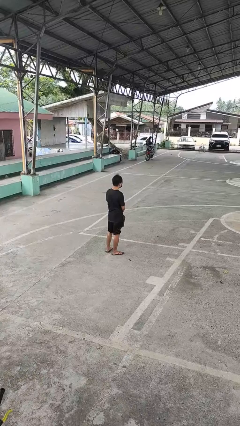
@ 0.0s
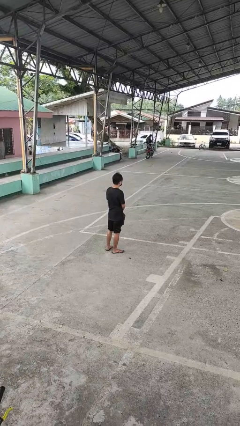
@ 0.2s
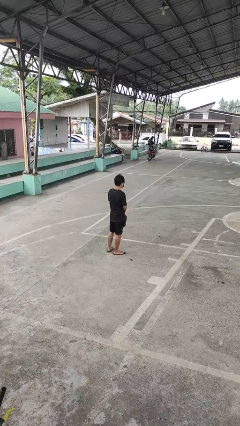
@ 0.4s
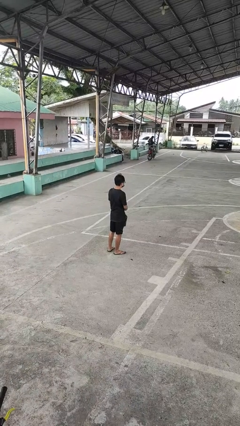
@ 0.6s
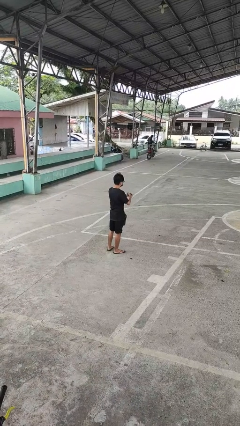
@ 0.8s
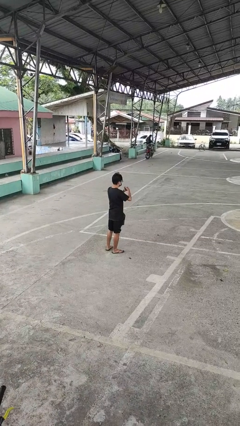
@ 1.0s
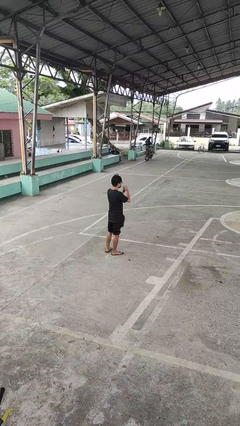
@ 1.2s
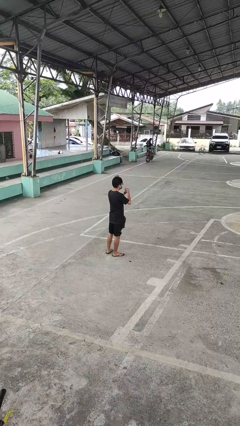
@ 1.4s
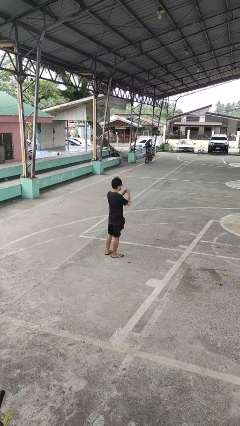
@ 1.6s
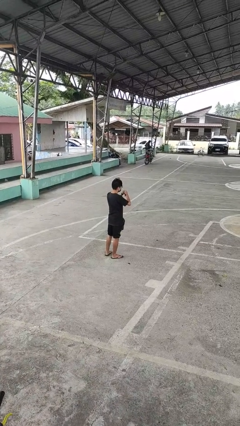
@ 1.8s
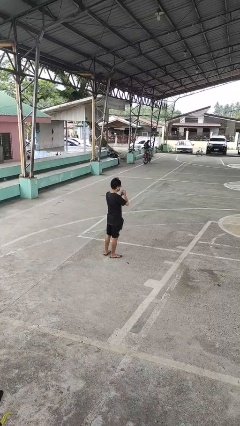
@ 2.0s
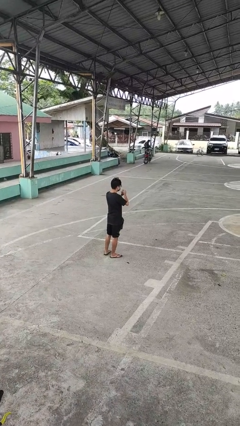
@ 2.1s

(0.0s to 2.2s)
person cracks knuckles

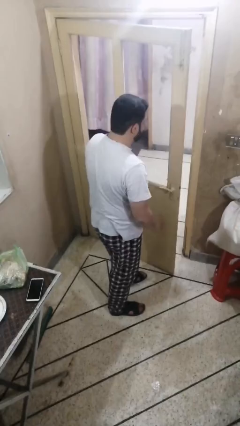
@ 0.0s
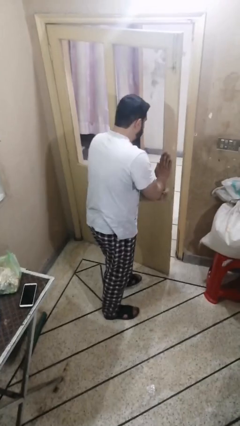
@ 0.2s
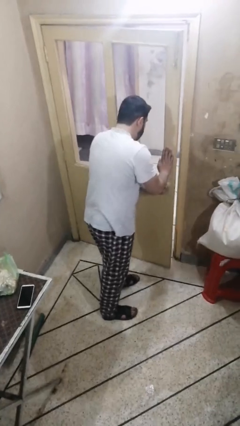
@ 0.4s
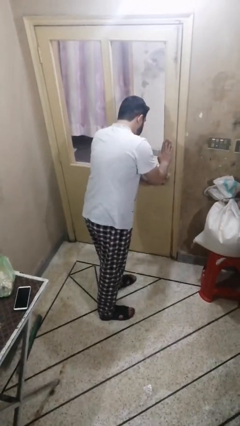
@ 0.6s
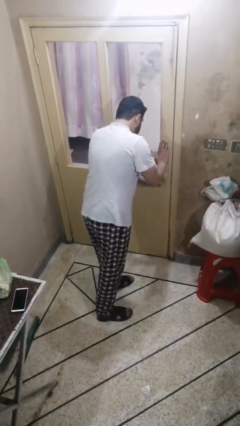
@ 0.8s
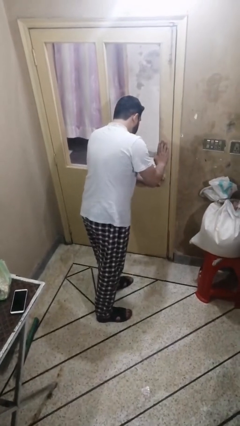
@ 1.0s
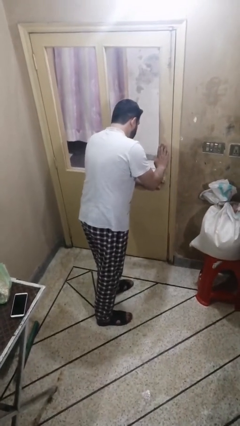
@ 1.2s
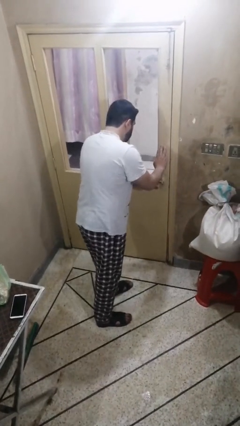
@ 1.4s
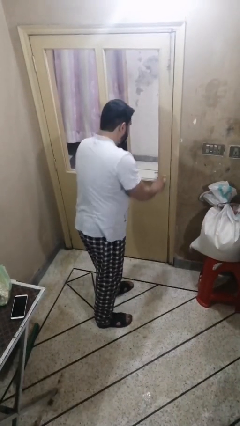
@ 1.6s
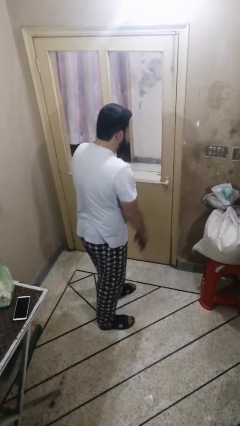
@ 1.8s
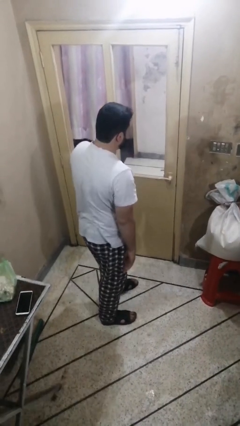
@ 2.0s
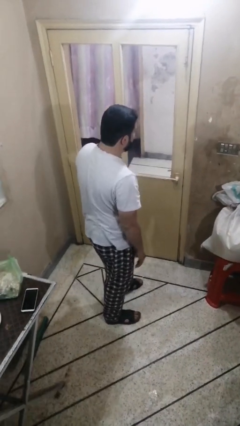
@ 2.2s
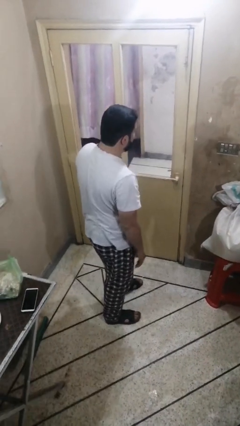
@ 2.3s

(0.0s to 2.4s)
person closes facility door

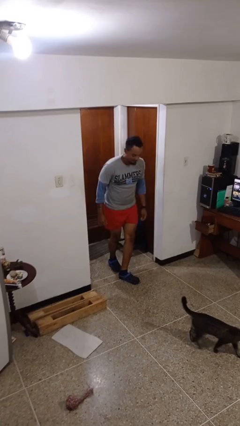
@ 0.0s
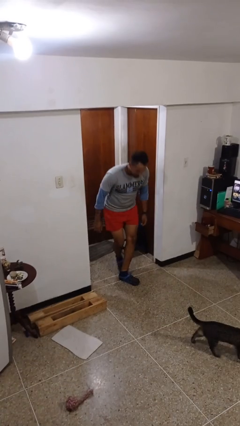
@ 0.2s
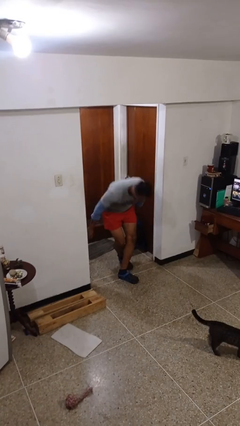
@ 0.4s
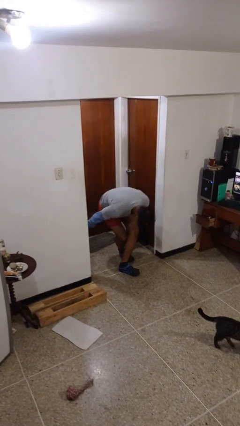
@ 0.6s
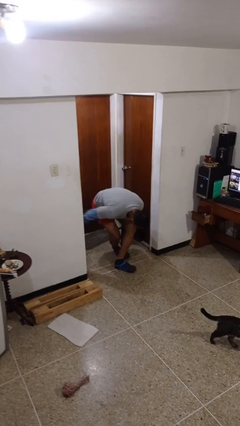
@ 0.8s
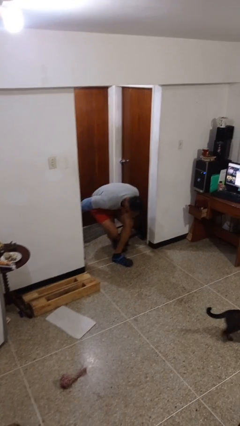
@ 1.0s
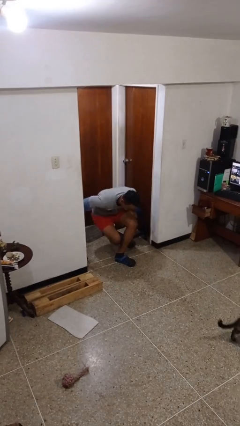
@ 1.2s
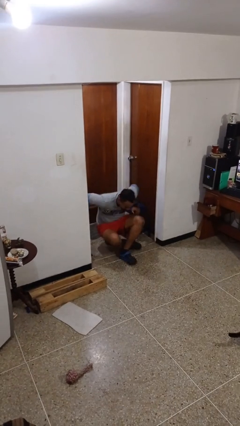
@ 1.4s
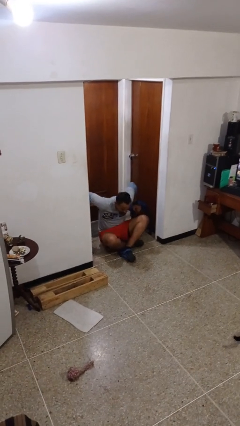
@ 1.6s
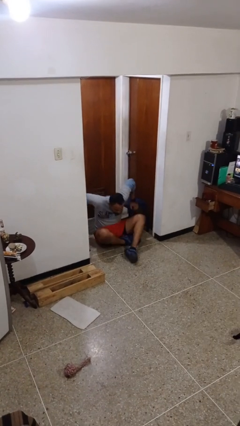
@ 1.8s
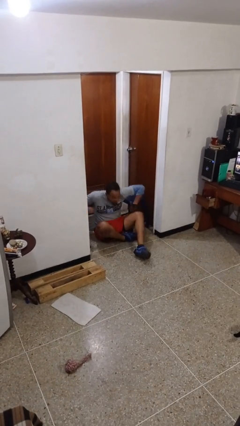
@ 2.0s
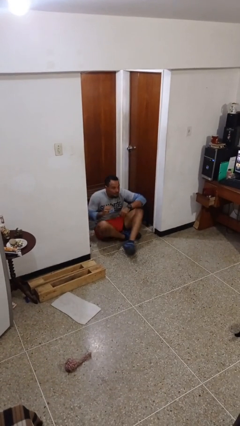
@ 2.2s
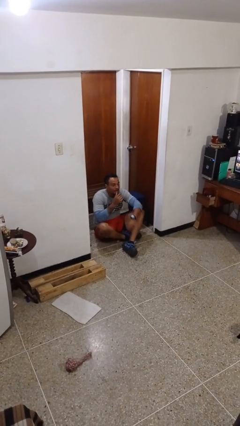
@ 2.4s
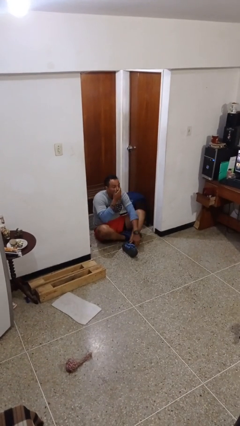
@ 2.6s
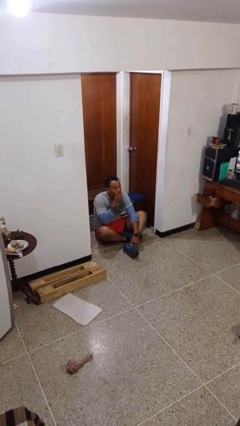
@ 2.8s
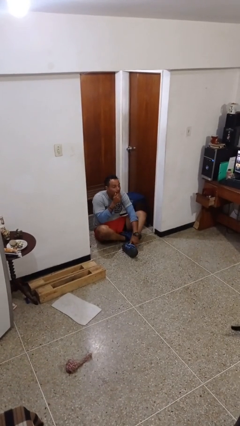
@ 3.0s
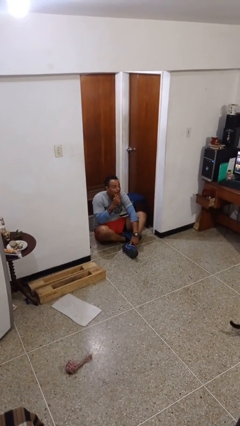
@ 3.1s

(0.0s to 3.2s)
person sits crisscross

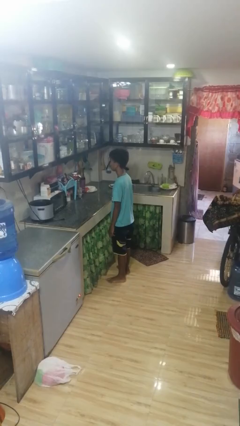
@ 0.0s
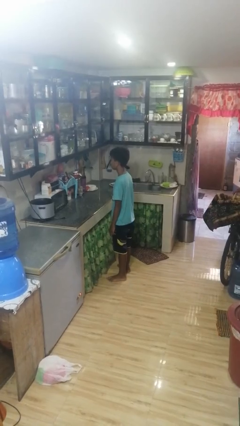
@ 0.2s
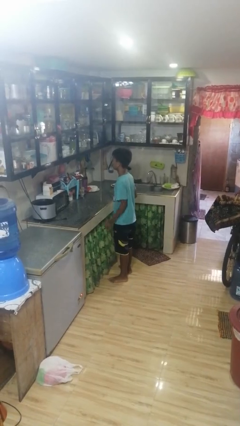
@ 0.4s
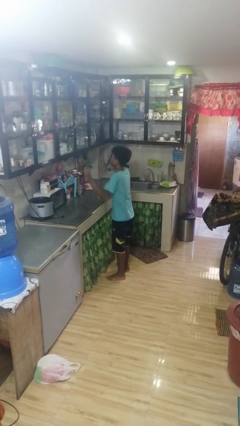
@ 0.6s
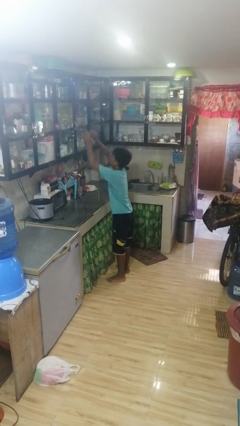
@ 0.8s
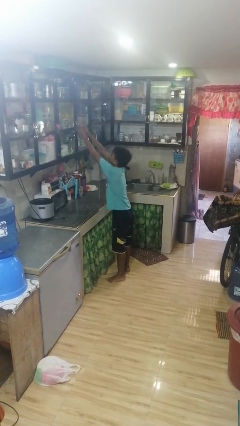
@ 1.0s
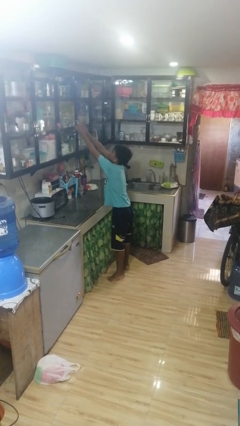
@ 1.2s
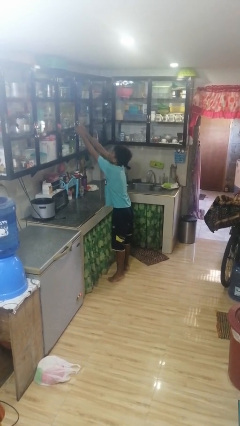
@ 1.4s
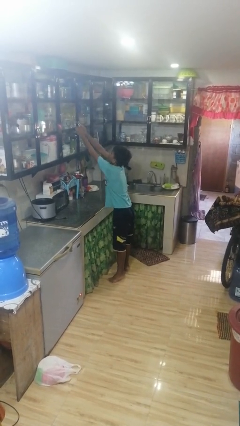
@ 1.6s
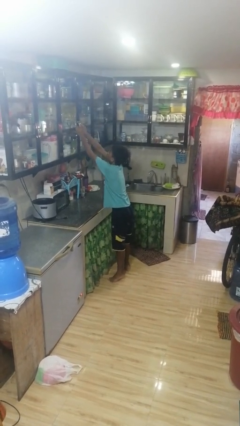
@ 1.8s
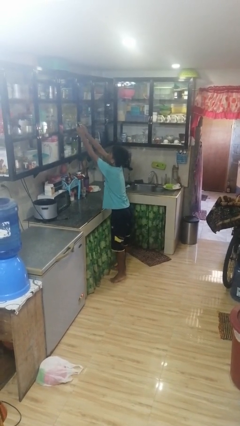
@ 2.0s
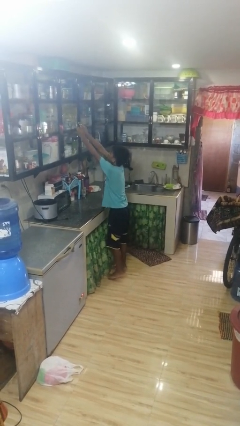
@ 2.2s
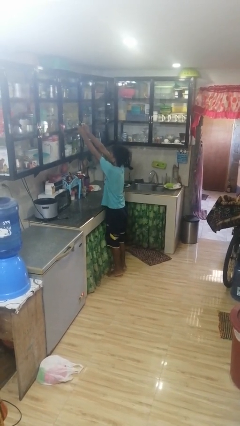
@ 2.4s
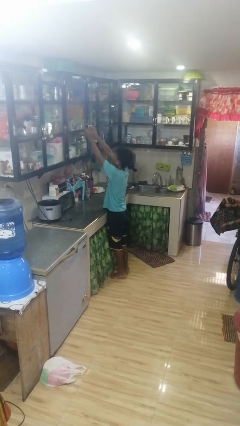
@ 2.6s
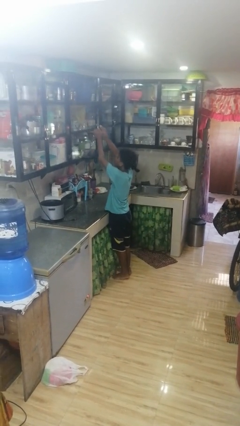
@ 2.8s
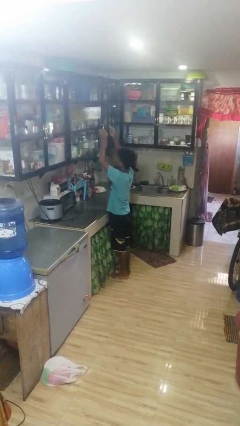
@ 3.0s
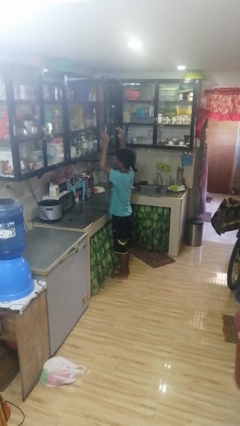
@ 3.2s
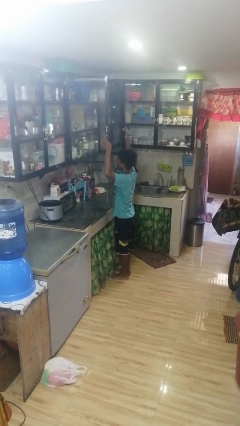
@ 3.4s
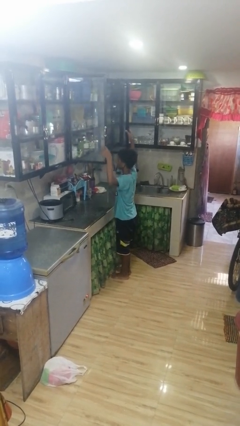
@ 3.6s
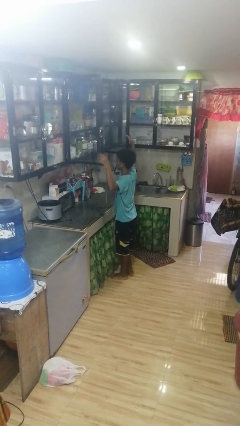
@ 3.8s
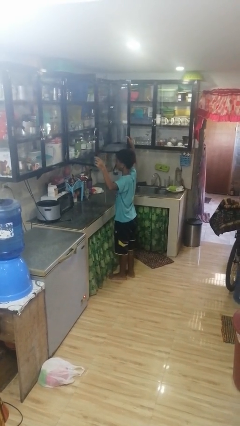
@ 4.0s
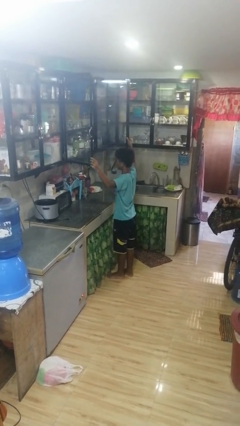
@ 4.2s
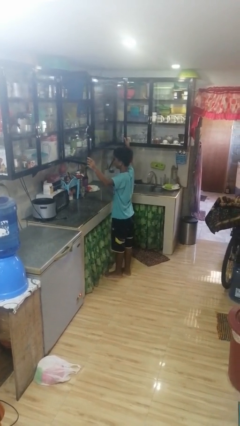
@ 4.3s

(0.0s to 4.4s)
person opens cabinet

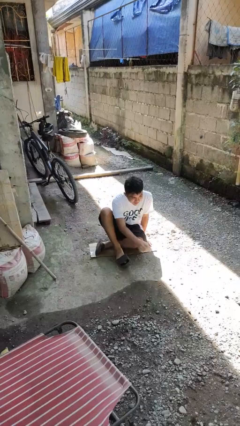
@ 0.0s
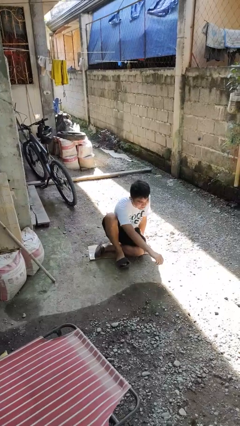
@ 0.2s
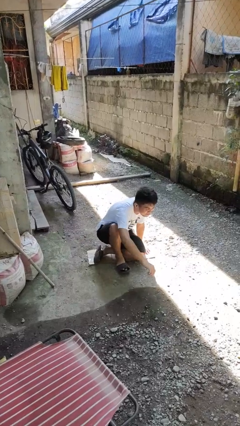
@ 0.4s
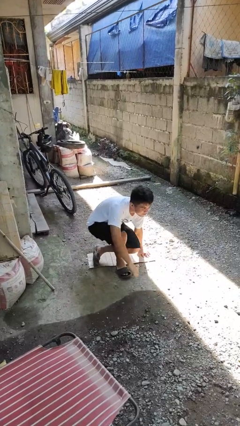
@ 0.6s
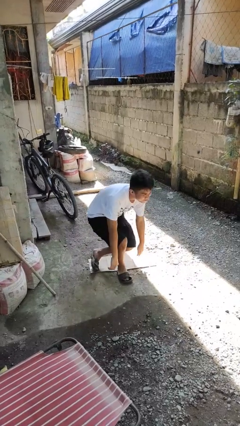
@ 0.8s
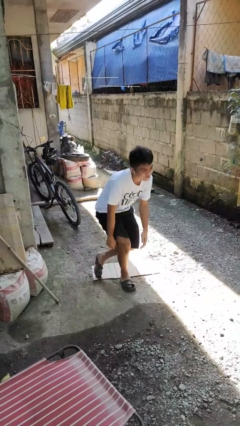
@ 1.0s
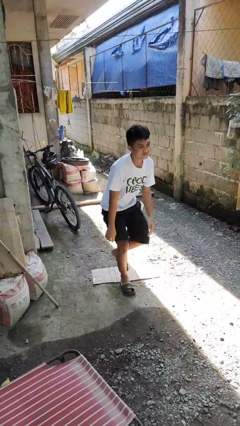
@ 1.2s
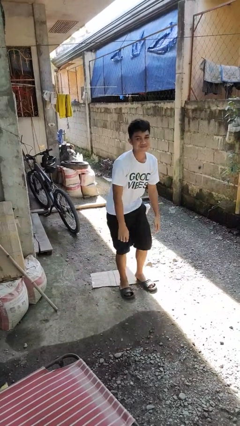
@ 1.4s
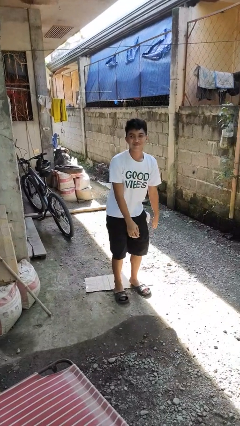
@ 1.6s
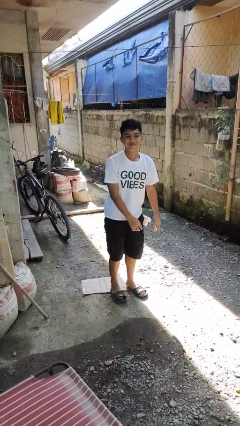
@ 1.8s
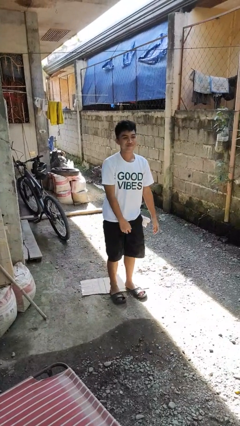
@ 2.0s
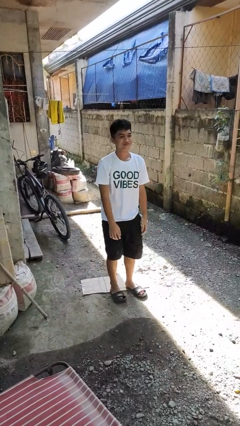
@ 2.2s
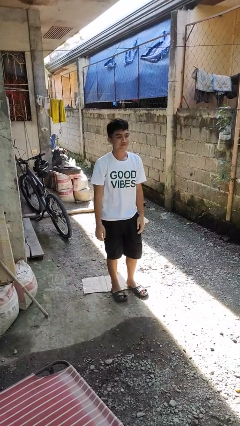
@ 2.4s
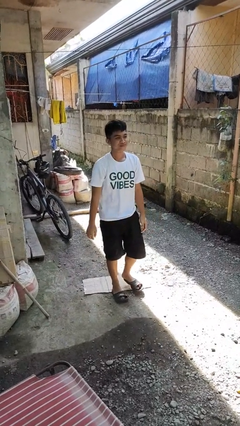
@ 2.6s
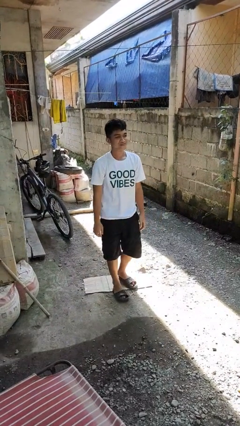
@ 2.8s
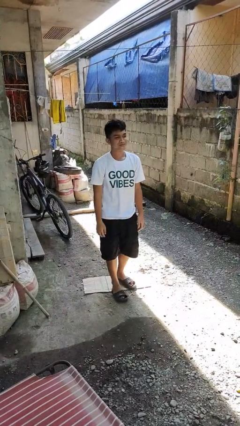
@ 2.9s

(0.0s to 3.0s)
person stands up from floor

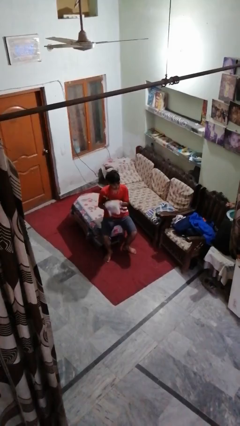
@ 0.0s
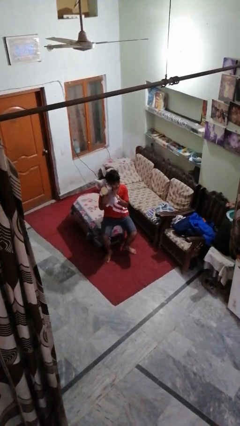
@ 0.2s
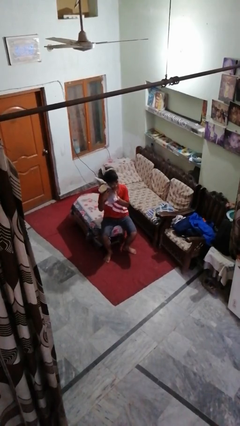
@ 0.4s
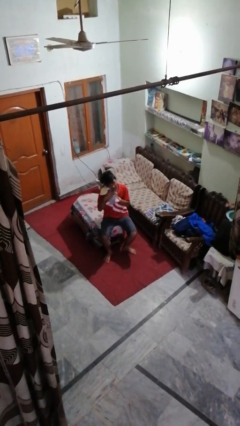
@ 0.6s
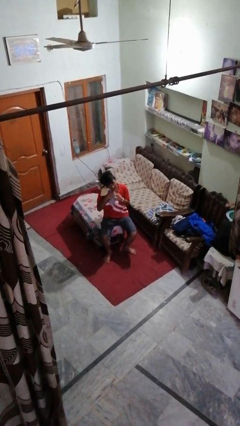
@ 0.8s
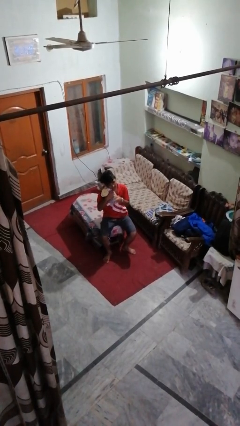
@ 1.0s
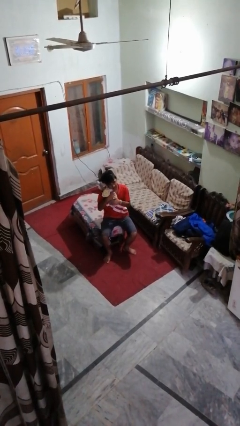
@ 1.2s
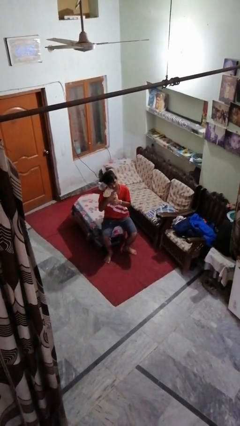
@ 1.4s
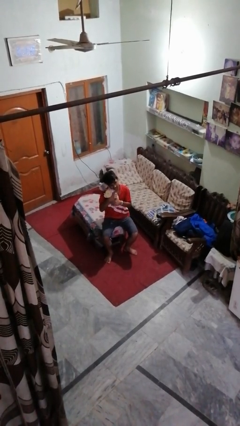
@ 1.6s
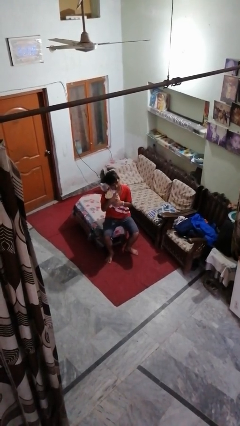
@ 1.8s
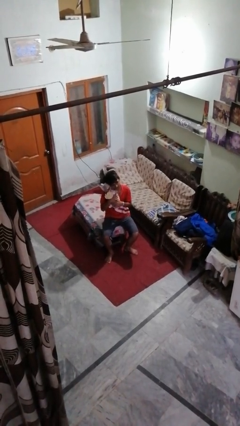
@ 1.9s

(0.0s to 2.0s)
person hugs stuffed animal

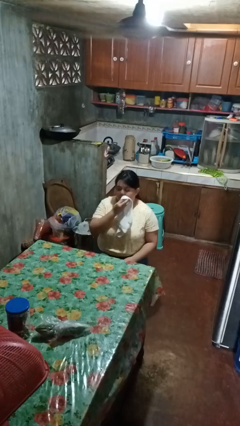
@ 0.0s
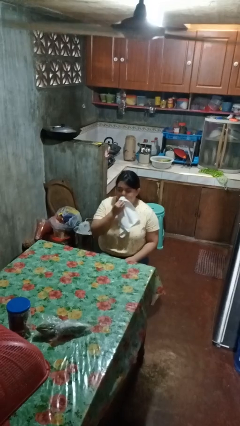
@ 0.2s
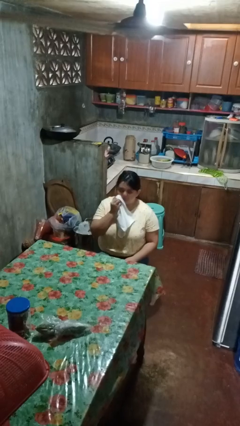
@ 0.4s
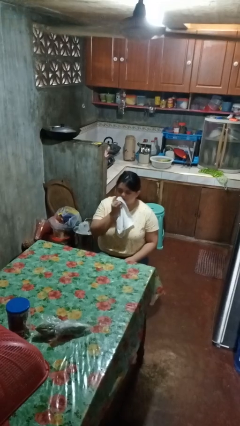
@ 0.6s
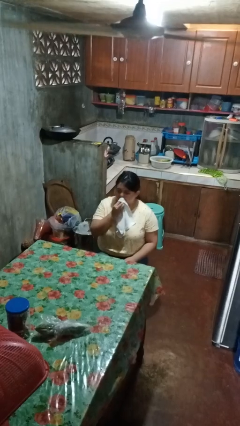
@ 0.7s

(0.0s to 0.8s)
person wipes mouth with napkin
